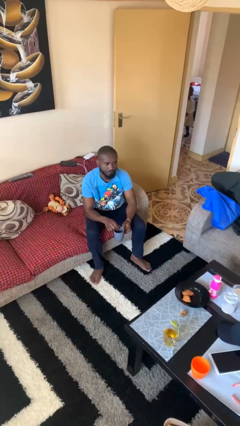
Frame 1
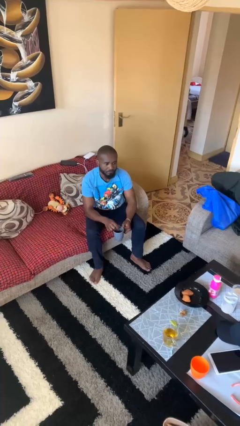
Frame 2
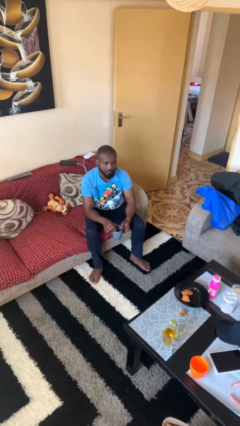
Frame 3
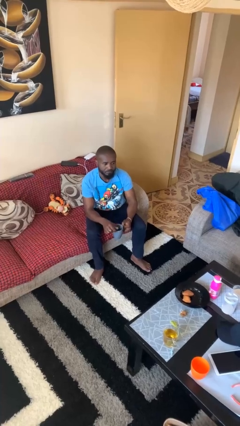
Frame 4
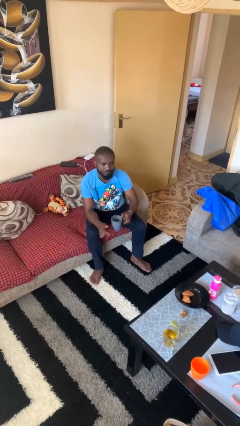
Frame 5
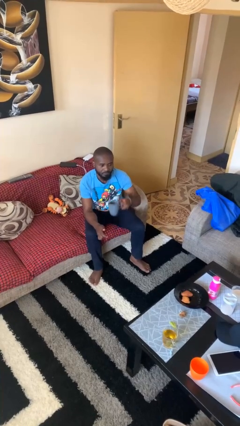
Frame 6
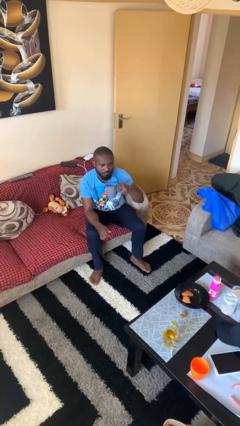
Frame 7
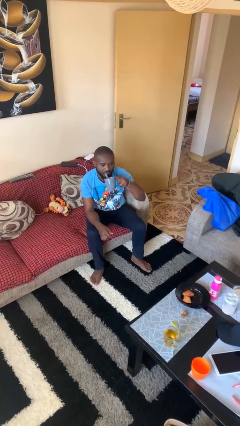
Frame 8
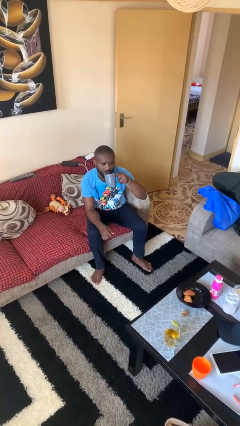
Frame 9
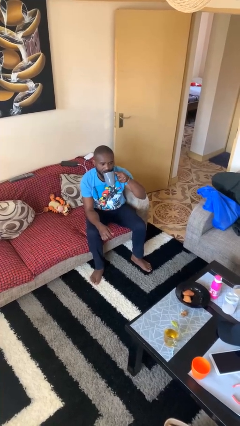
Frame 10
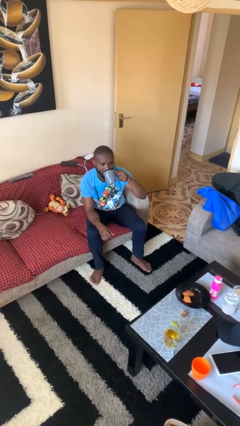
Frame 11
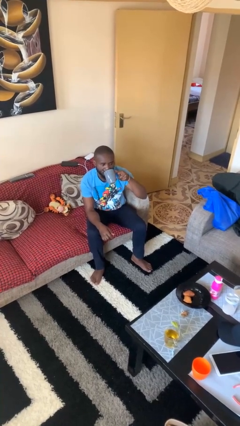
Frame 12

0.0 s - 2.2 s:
person drinks from mug

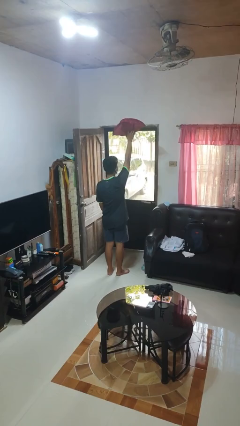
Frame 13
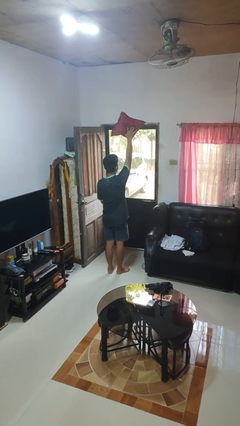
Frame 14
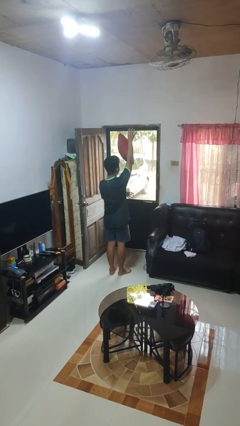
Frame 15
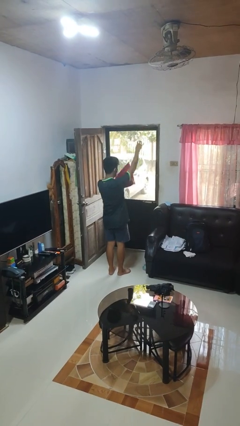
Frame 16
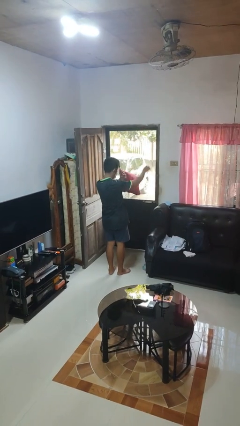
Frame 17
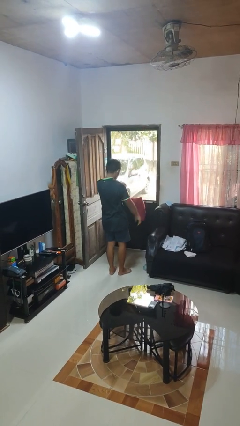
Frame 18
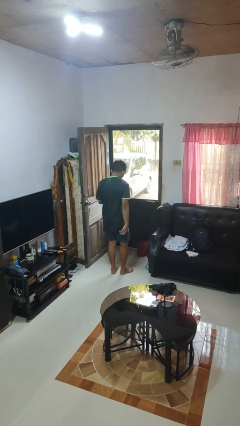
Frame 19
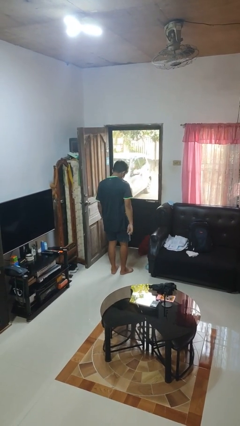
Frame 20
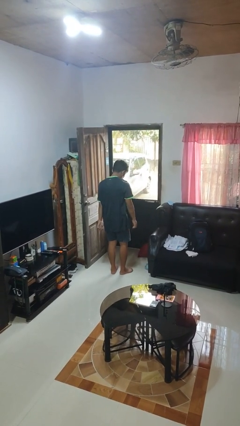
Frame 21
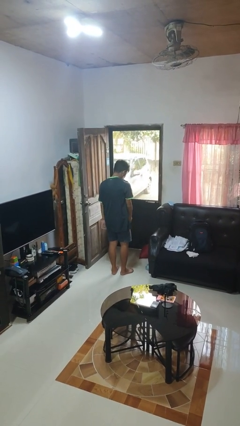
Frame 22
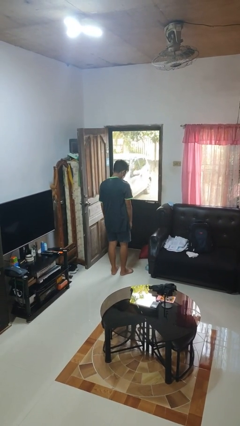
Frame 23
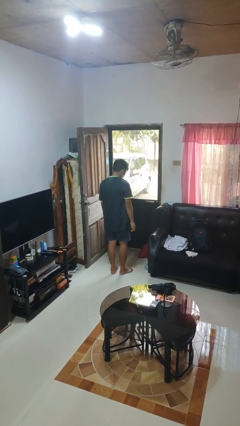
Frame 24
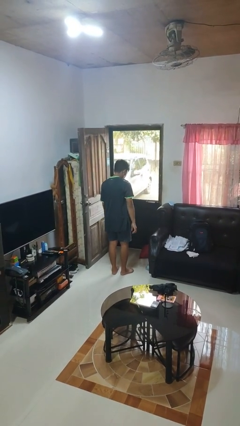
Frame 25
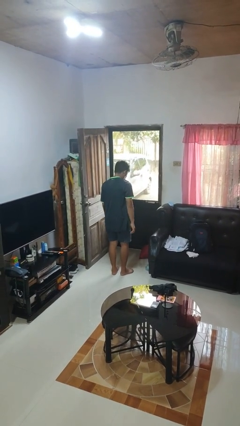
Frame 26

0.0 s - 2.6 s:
person drops object

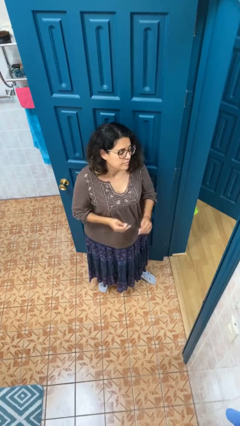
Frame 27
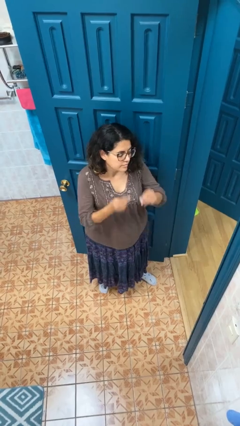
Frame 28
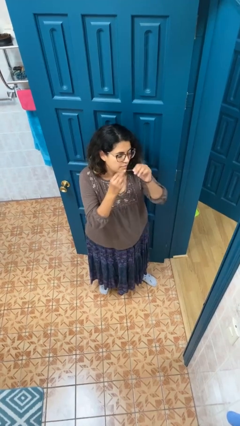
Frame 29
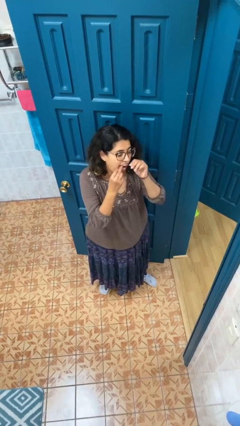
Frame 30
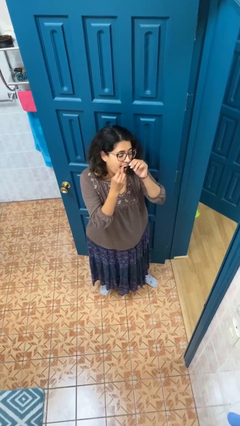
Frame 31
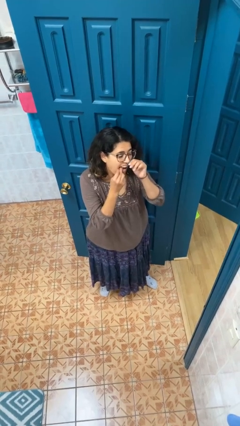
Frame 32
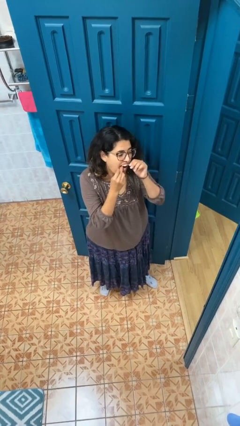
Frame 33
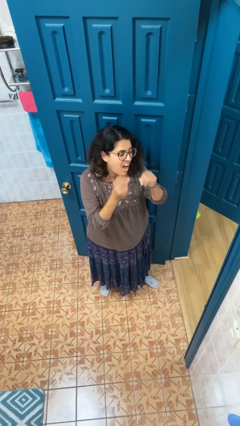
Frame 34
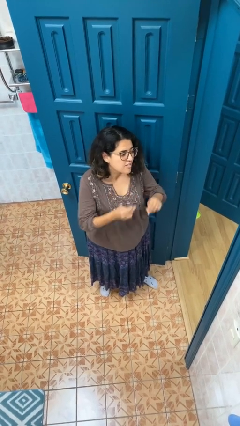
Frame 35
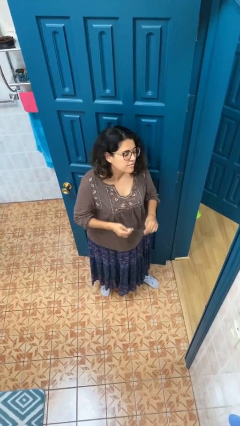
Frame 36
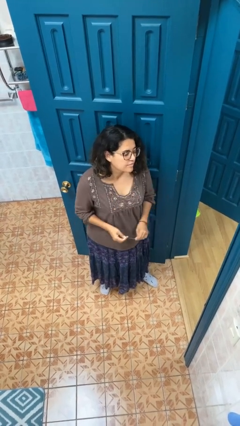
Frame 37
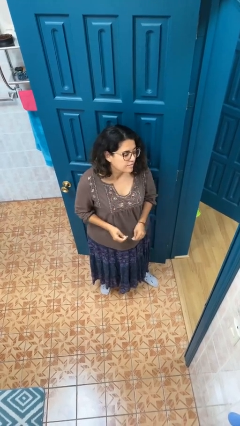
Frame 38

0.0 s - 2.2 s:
person flosses

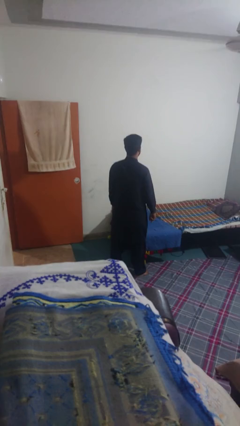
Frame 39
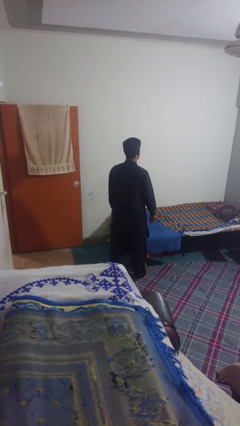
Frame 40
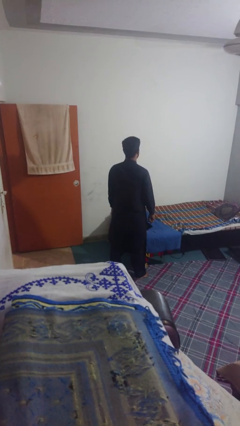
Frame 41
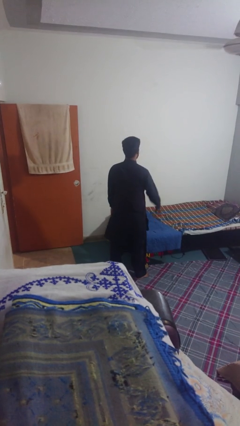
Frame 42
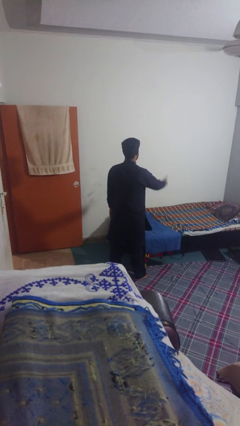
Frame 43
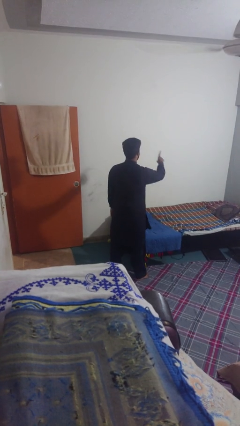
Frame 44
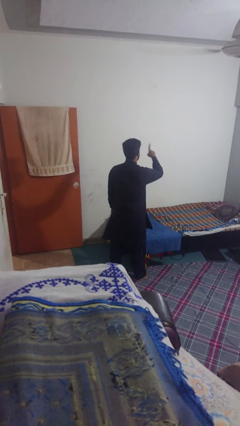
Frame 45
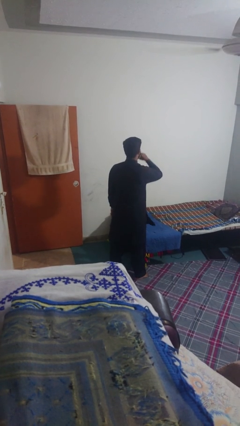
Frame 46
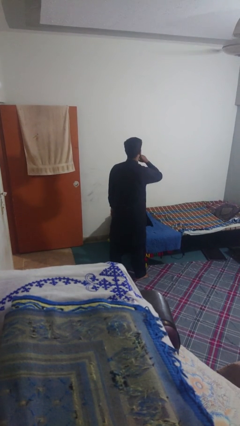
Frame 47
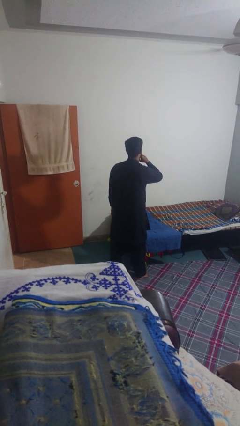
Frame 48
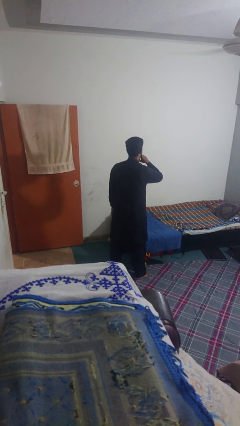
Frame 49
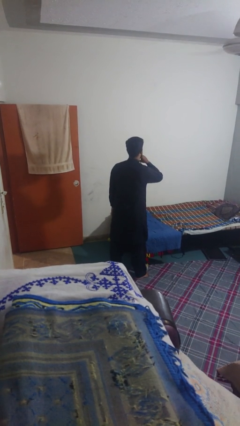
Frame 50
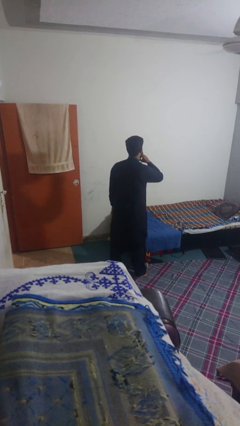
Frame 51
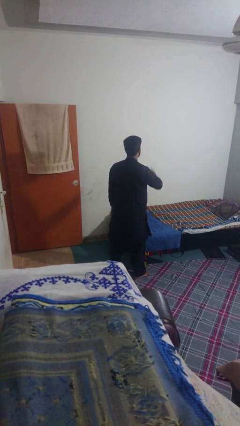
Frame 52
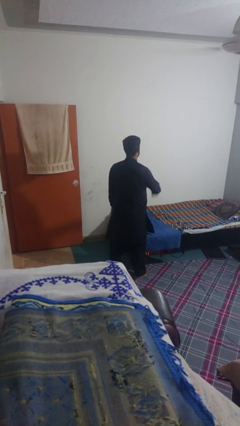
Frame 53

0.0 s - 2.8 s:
person gestures be quiet

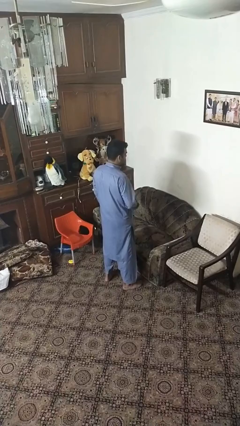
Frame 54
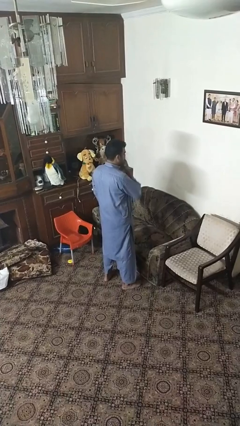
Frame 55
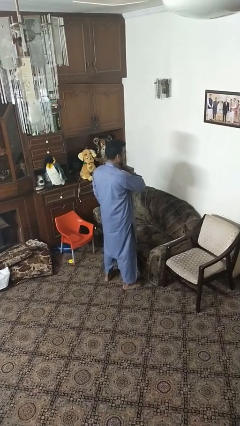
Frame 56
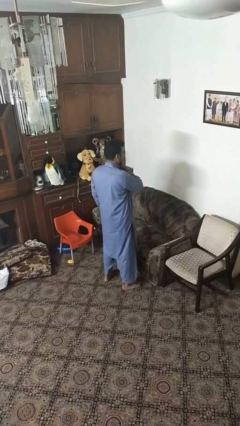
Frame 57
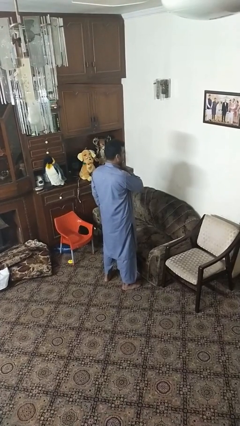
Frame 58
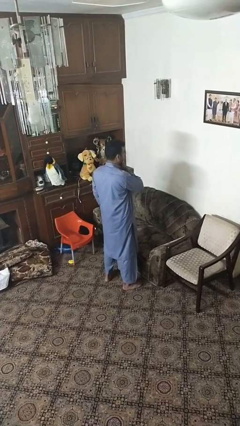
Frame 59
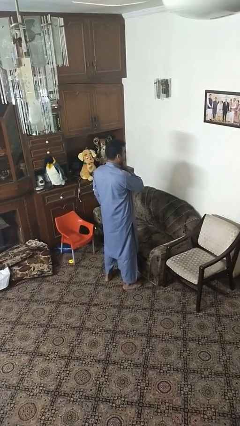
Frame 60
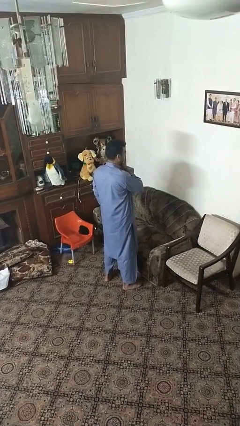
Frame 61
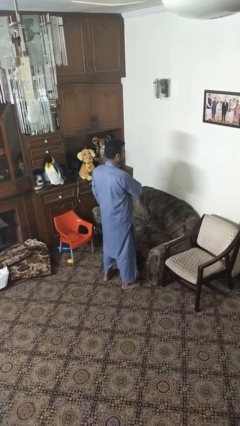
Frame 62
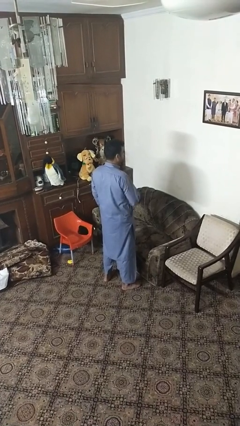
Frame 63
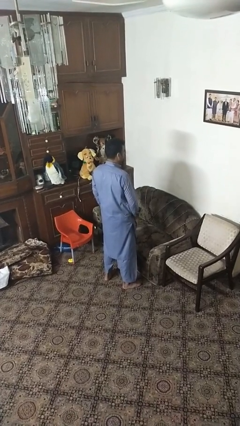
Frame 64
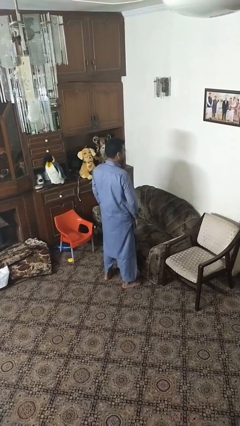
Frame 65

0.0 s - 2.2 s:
person strokes chin

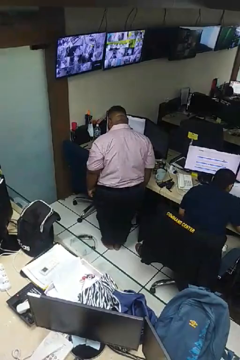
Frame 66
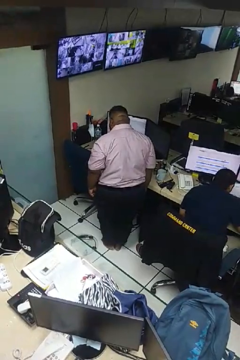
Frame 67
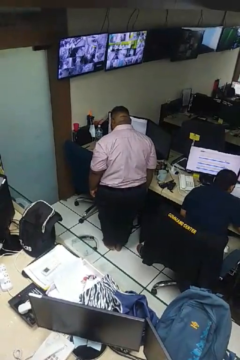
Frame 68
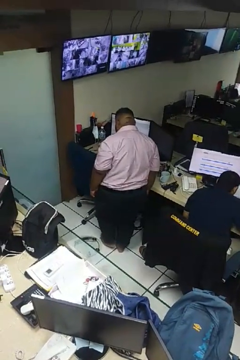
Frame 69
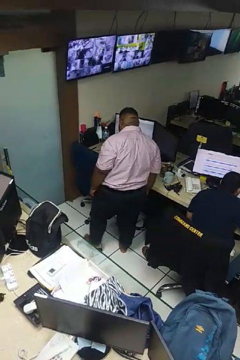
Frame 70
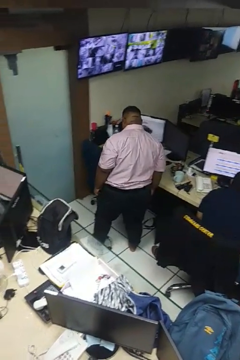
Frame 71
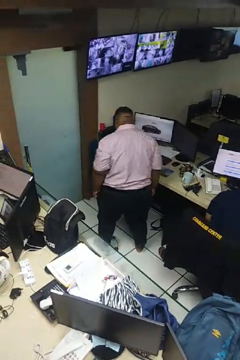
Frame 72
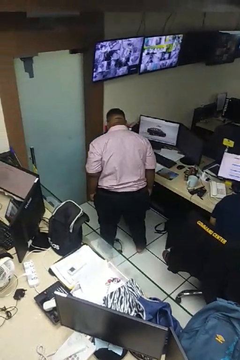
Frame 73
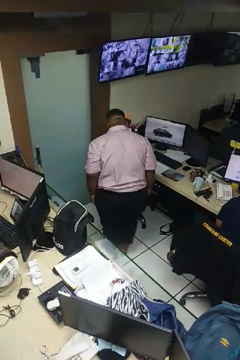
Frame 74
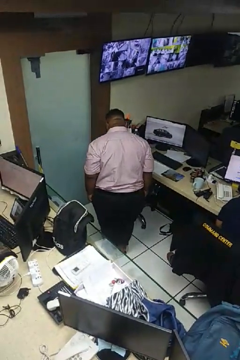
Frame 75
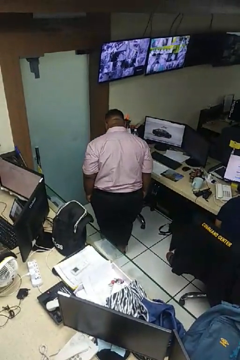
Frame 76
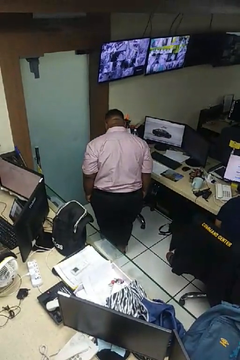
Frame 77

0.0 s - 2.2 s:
person uses bodyweight scale

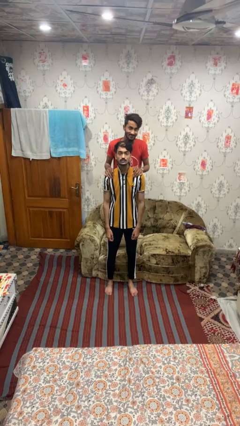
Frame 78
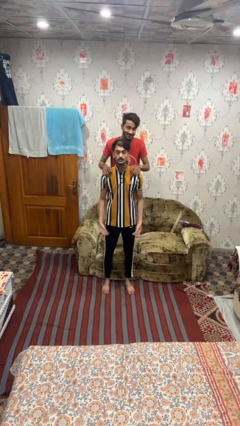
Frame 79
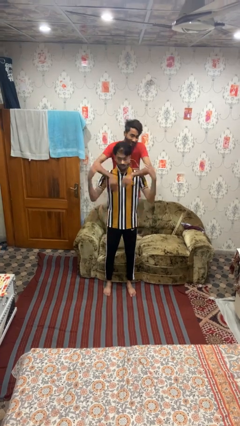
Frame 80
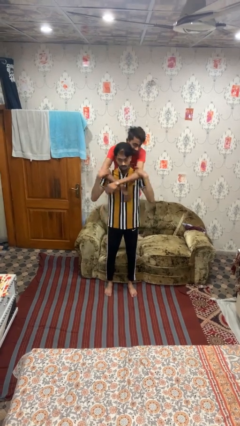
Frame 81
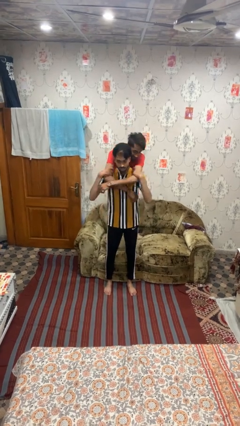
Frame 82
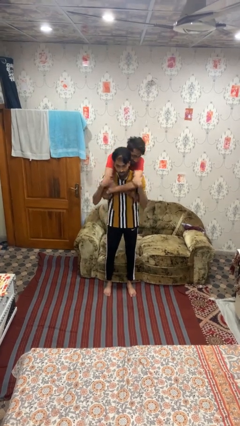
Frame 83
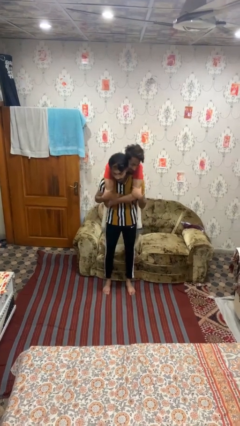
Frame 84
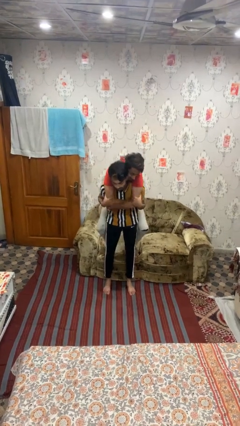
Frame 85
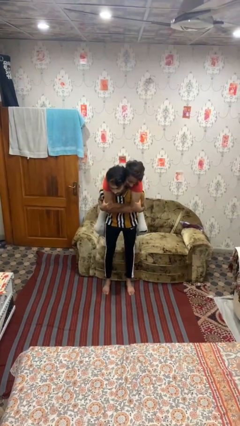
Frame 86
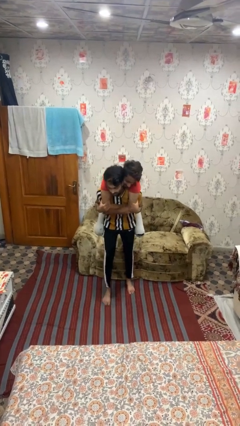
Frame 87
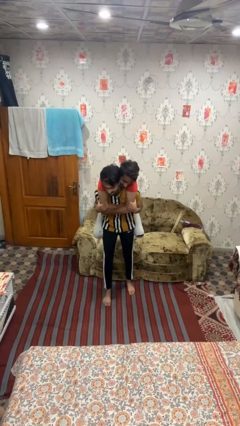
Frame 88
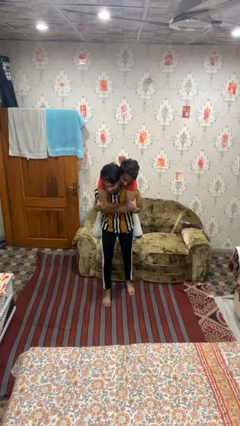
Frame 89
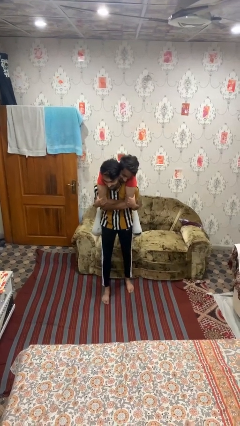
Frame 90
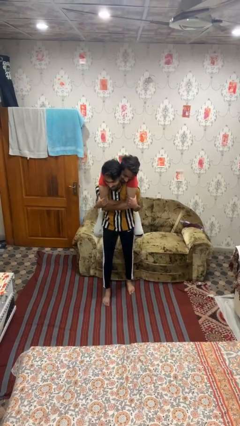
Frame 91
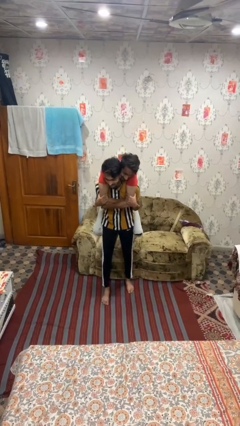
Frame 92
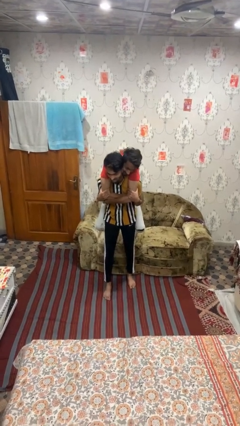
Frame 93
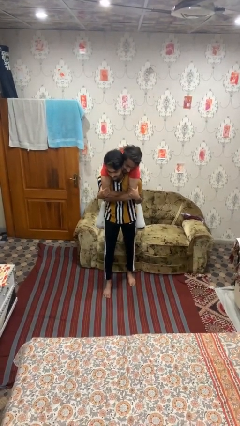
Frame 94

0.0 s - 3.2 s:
person carries person on back
